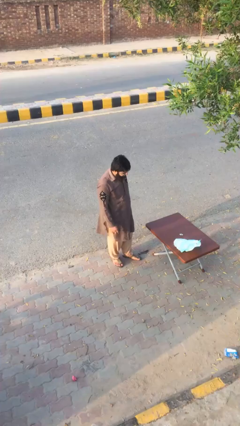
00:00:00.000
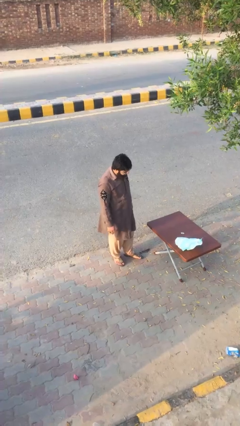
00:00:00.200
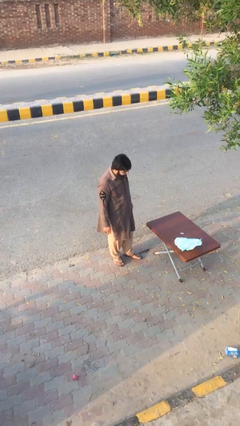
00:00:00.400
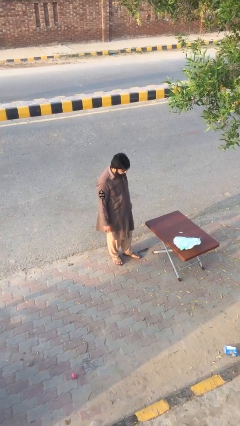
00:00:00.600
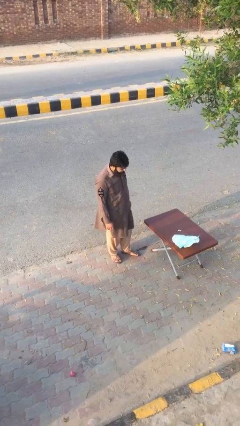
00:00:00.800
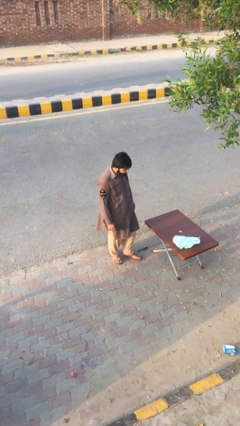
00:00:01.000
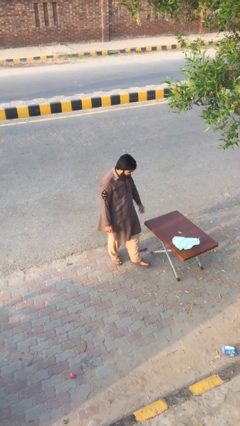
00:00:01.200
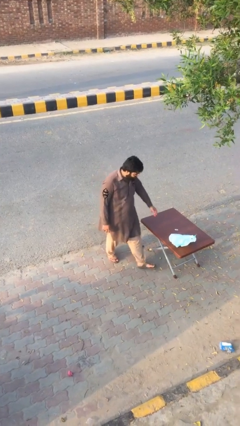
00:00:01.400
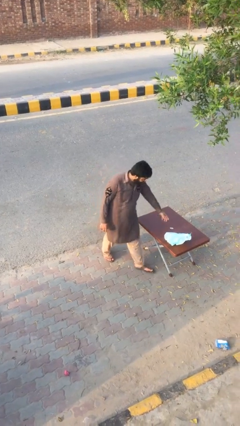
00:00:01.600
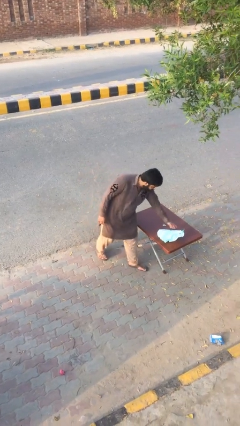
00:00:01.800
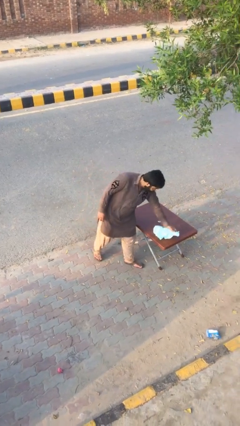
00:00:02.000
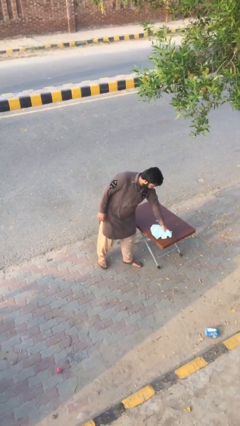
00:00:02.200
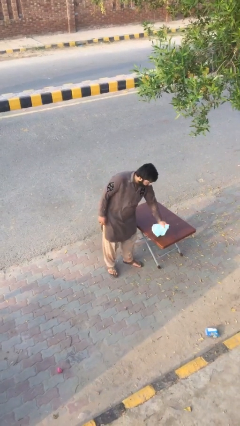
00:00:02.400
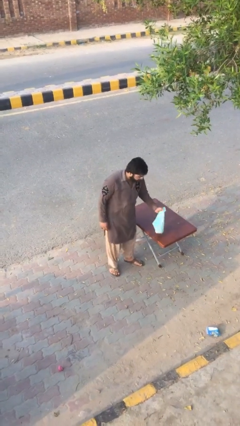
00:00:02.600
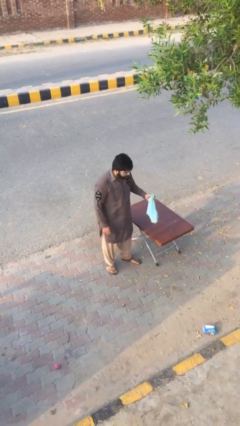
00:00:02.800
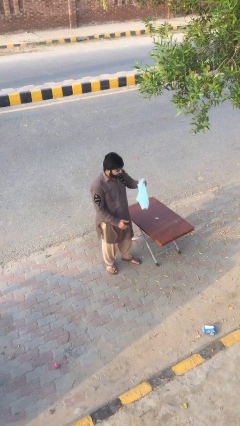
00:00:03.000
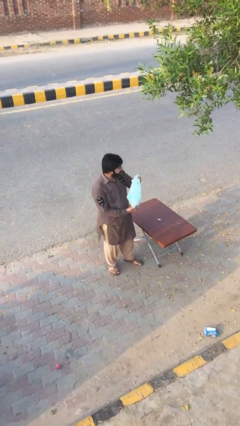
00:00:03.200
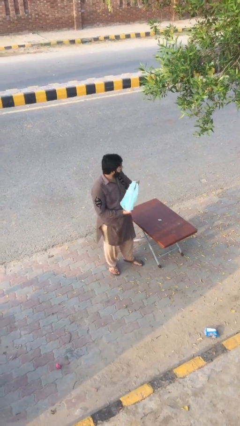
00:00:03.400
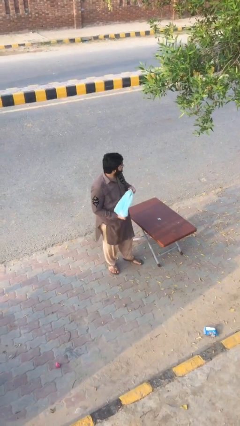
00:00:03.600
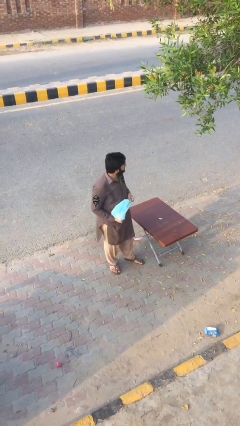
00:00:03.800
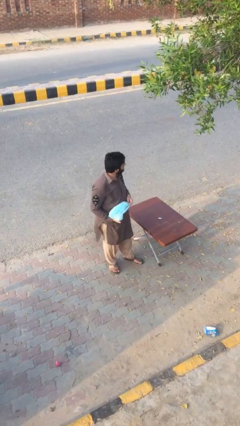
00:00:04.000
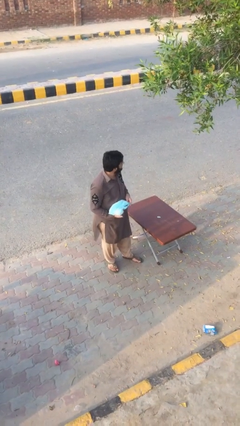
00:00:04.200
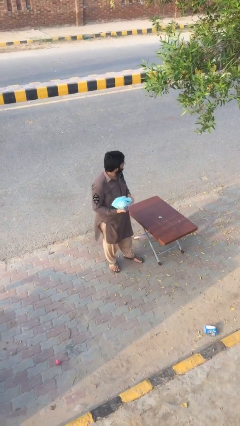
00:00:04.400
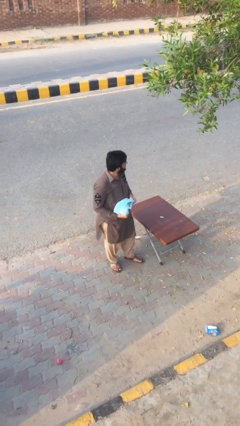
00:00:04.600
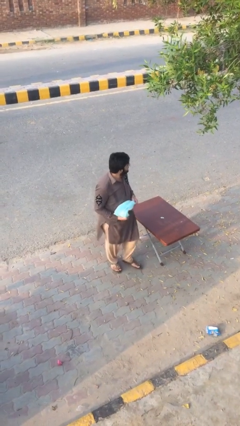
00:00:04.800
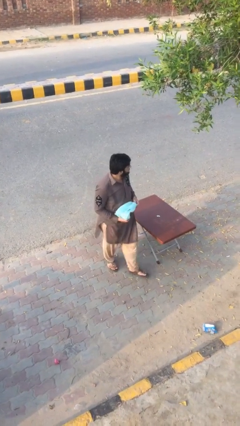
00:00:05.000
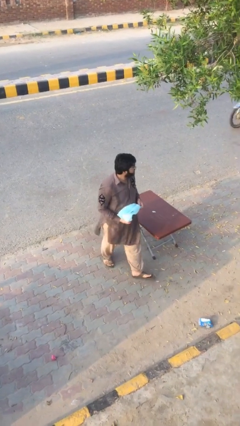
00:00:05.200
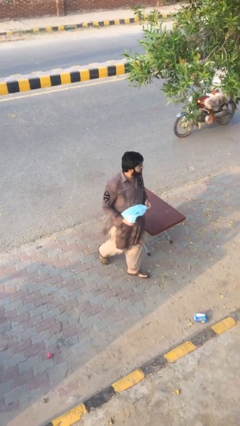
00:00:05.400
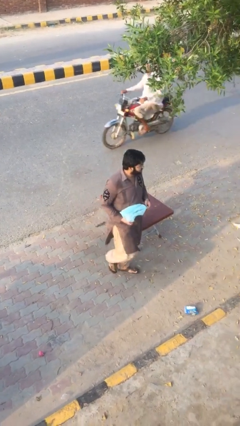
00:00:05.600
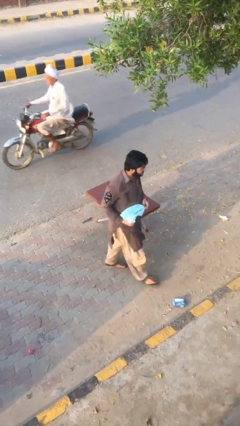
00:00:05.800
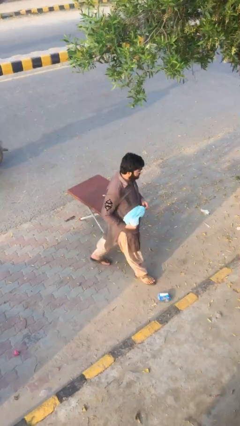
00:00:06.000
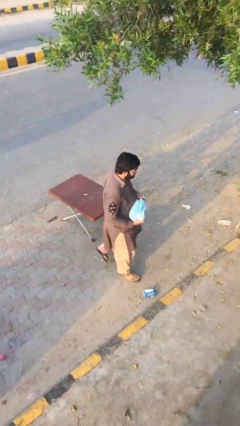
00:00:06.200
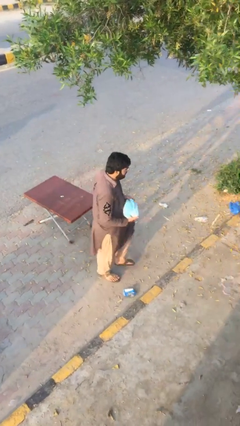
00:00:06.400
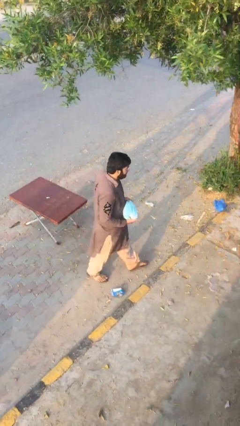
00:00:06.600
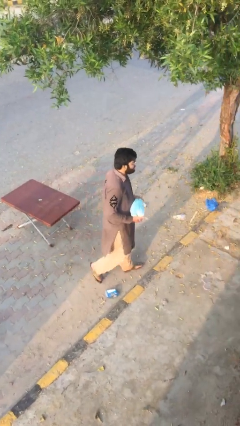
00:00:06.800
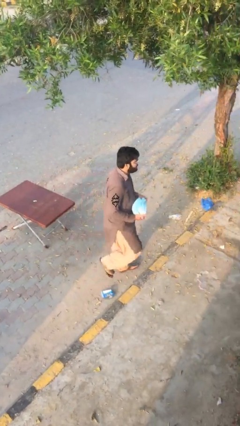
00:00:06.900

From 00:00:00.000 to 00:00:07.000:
person picks up object from table

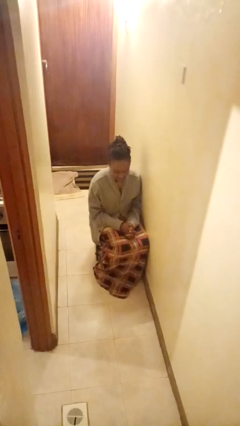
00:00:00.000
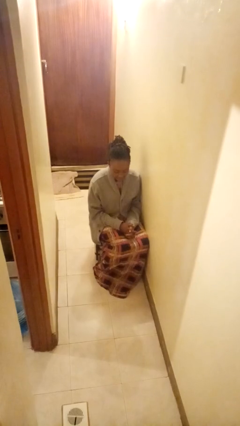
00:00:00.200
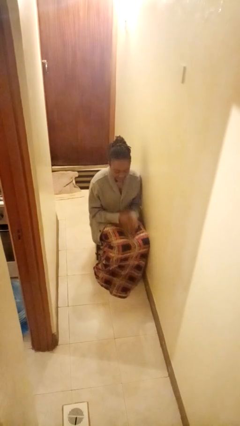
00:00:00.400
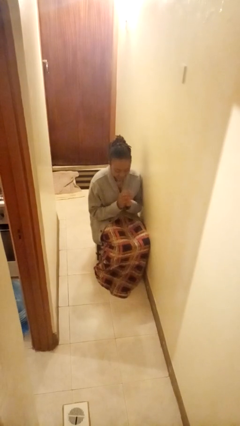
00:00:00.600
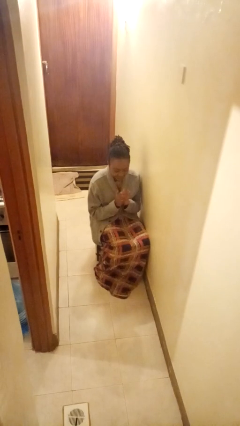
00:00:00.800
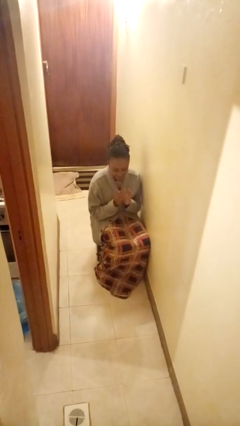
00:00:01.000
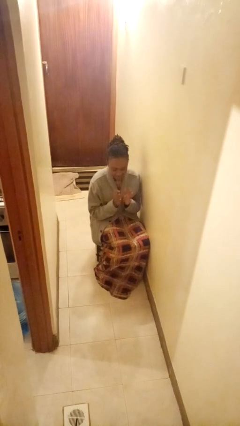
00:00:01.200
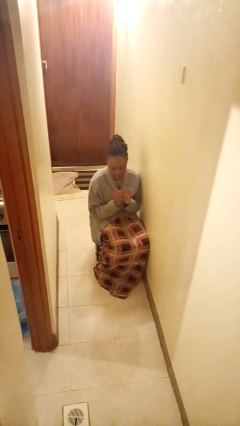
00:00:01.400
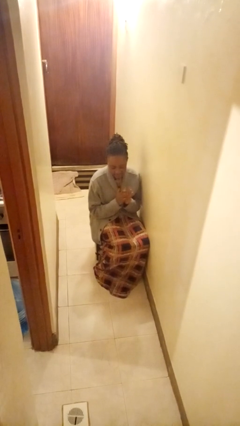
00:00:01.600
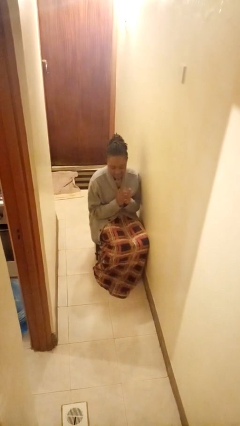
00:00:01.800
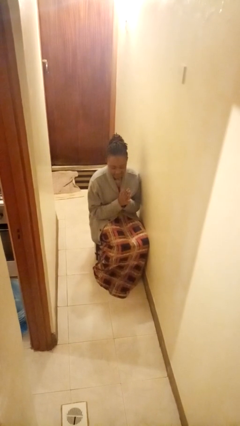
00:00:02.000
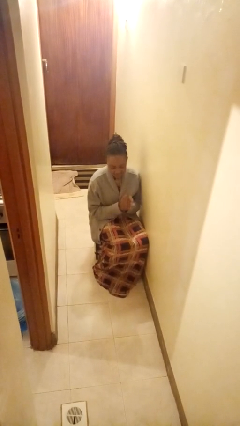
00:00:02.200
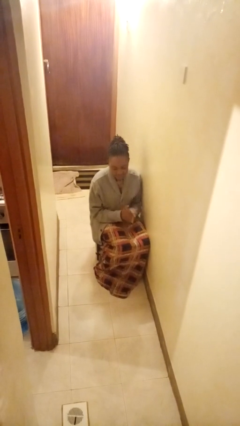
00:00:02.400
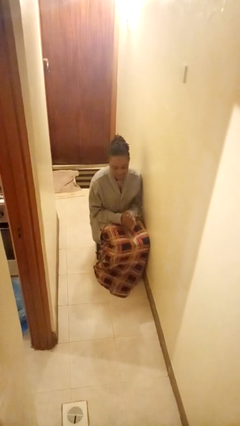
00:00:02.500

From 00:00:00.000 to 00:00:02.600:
person claps hands

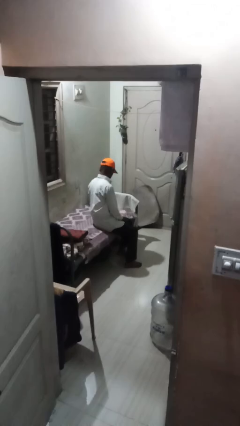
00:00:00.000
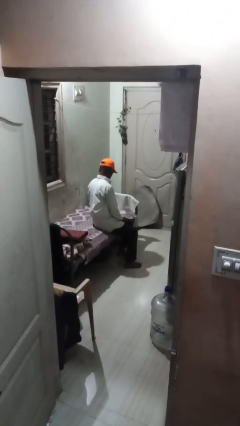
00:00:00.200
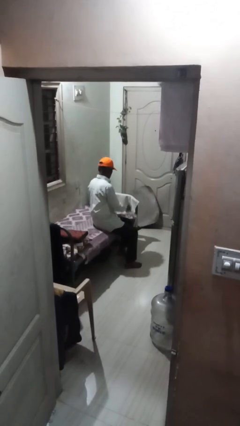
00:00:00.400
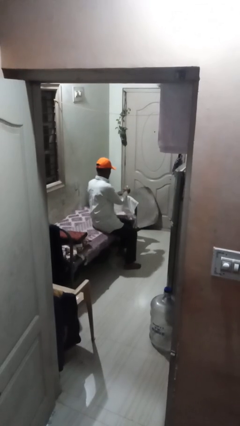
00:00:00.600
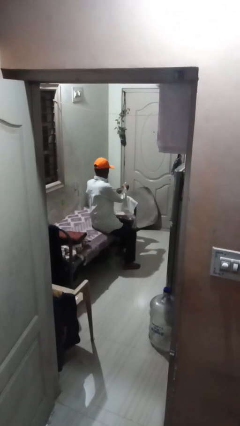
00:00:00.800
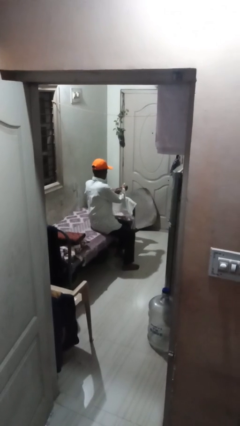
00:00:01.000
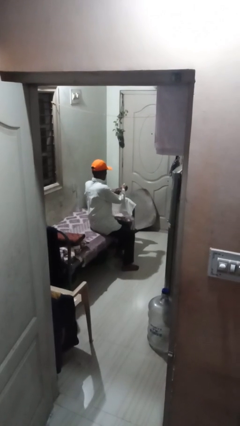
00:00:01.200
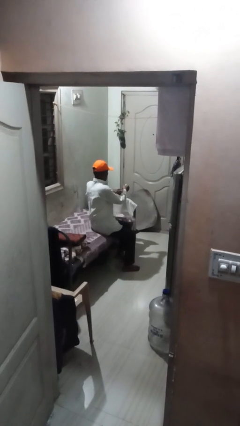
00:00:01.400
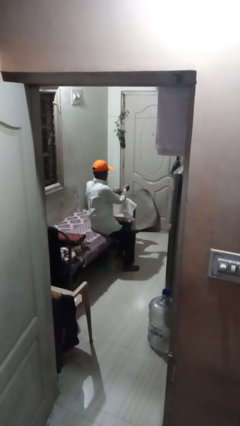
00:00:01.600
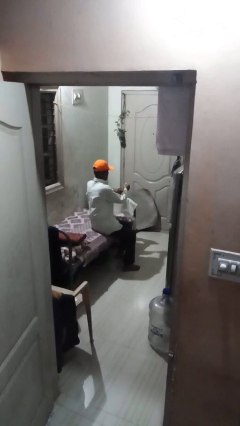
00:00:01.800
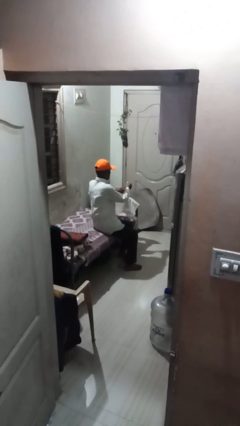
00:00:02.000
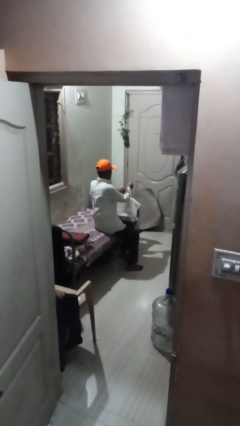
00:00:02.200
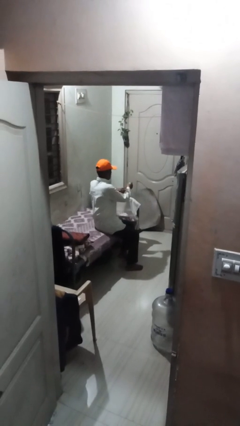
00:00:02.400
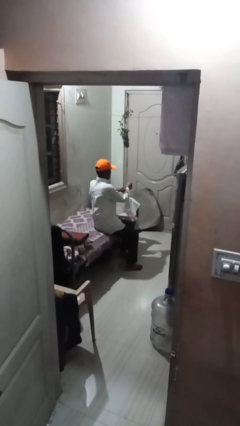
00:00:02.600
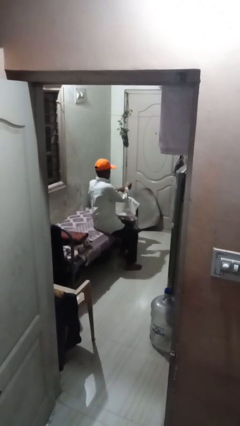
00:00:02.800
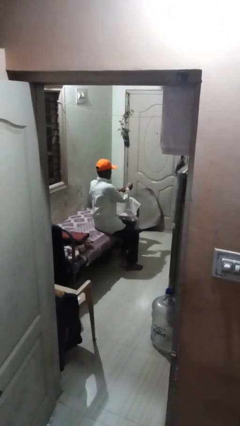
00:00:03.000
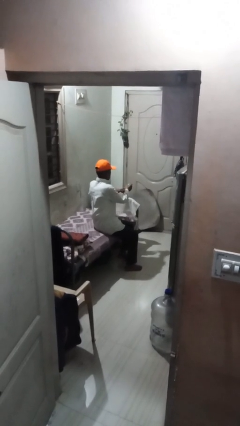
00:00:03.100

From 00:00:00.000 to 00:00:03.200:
person clips fingernails

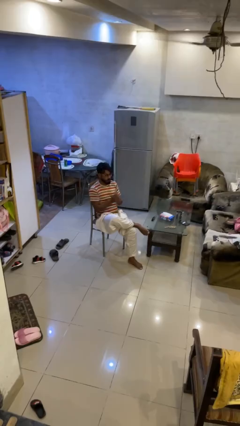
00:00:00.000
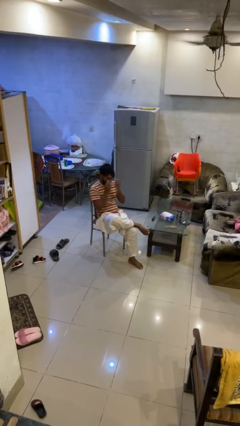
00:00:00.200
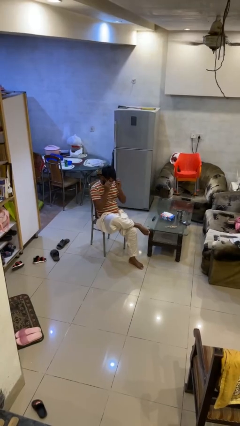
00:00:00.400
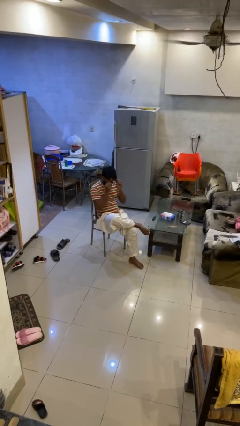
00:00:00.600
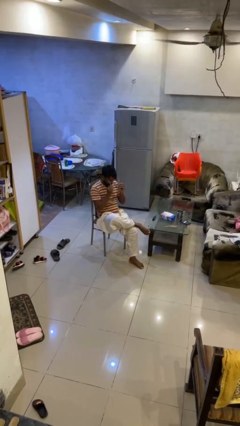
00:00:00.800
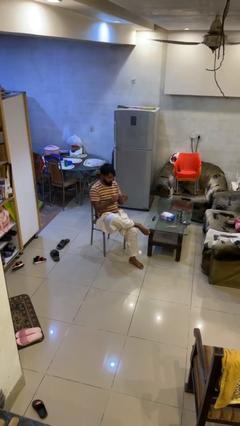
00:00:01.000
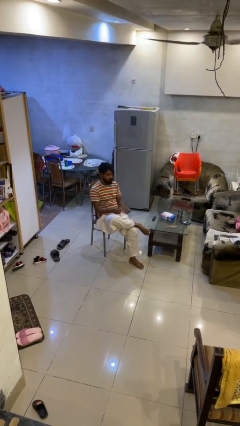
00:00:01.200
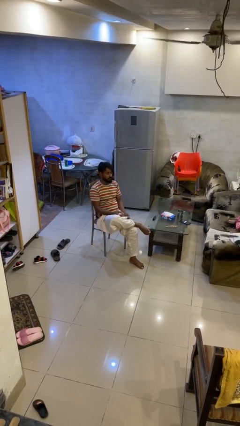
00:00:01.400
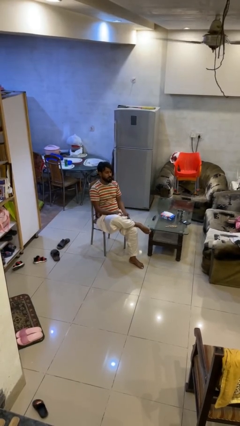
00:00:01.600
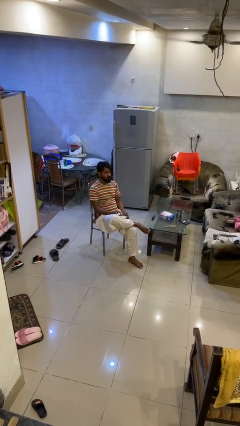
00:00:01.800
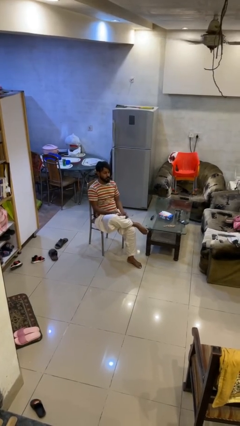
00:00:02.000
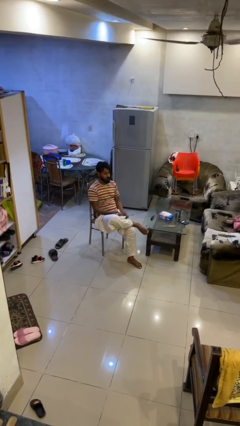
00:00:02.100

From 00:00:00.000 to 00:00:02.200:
person takes off glasses

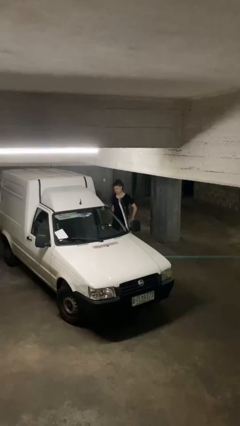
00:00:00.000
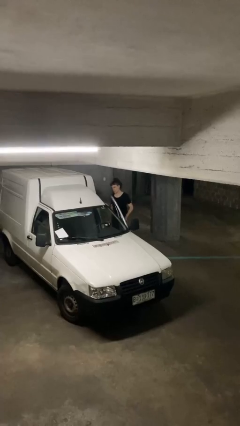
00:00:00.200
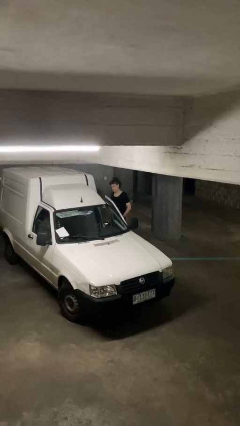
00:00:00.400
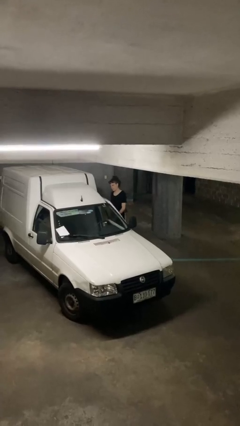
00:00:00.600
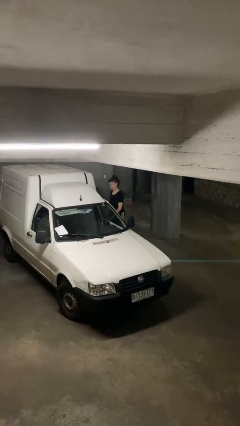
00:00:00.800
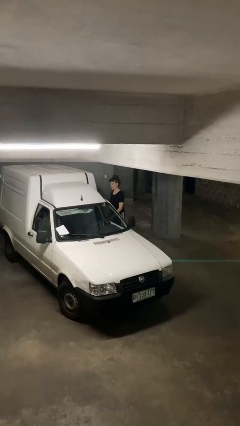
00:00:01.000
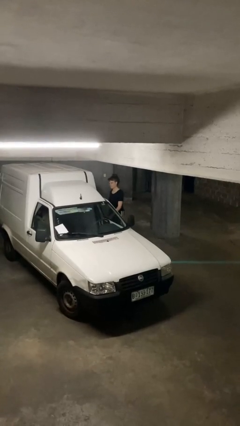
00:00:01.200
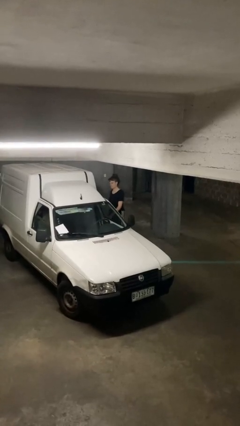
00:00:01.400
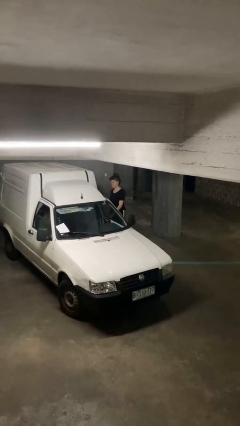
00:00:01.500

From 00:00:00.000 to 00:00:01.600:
person closes car door

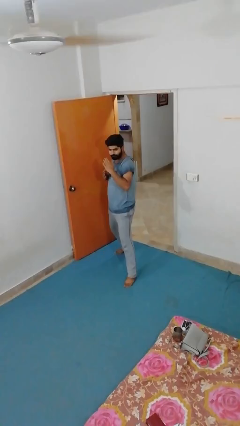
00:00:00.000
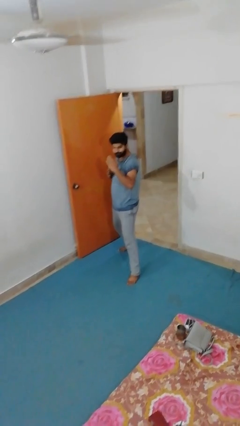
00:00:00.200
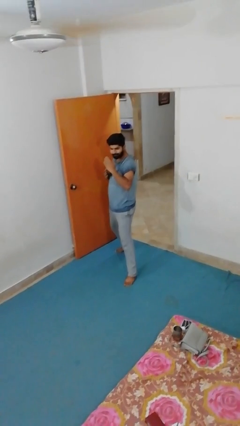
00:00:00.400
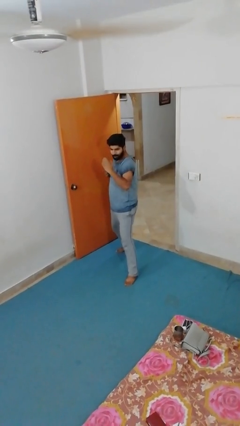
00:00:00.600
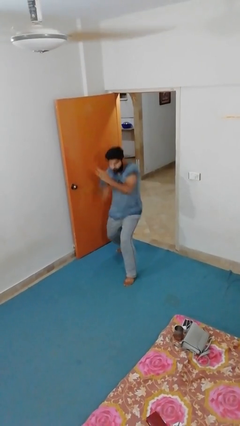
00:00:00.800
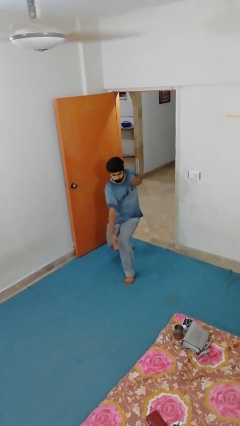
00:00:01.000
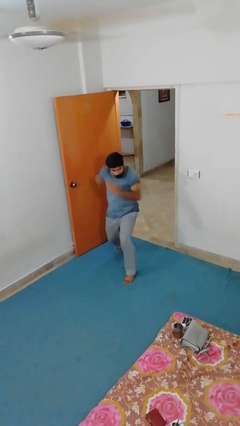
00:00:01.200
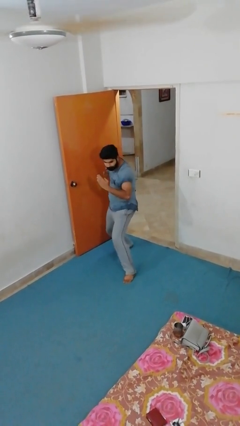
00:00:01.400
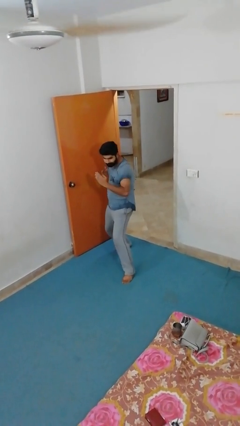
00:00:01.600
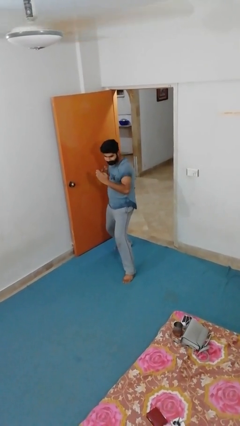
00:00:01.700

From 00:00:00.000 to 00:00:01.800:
person karate chop
